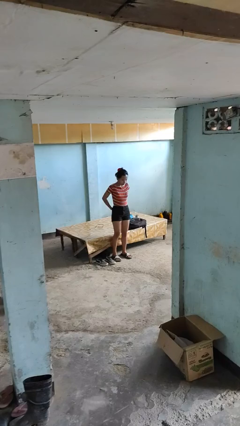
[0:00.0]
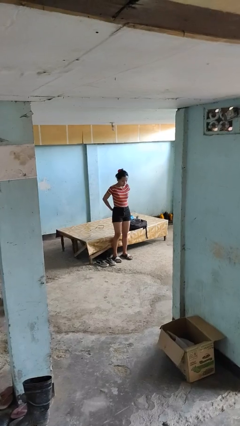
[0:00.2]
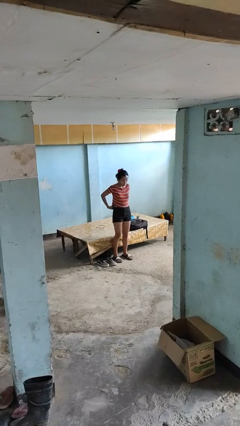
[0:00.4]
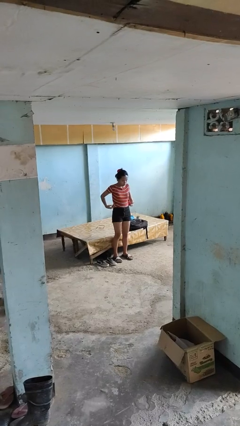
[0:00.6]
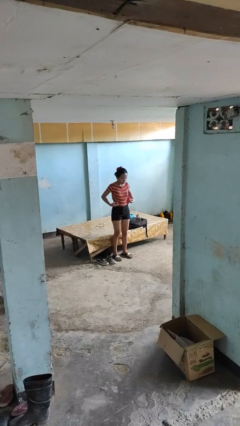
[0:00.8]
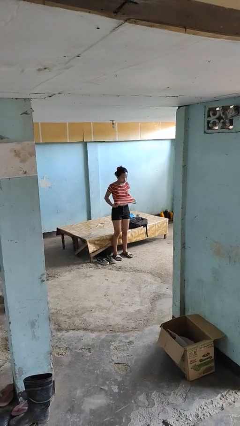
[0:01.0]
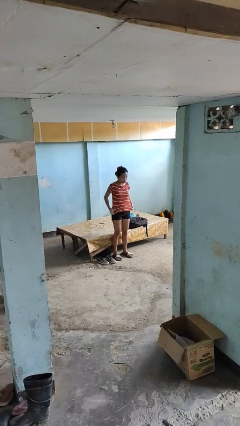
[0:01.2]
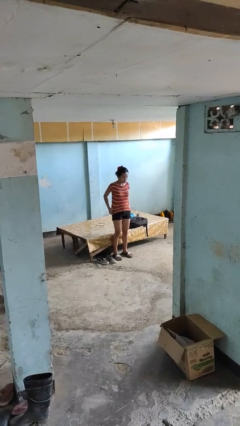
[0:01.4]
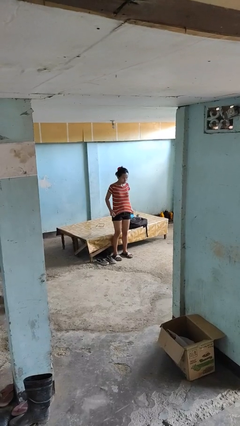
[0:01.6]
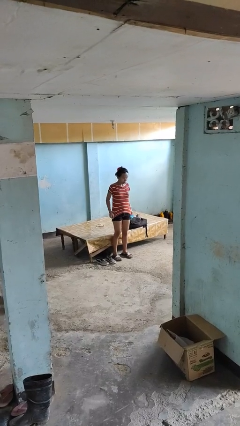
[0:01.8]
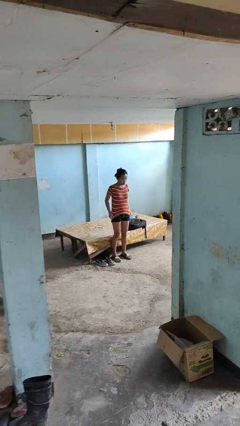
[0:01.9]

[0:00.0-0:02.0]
person untucks shirt

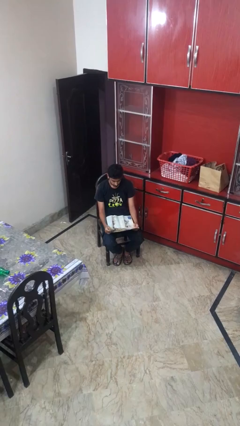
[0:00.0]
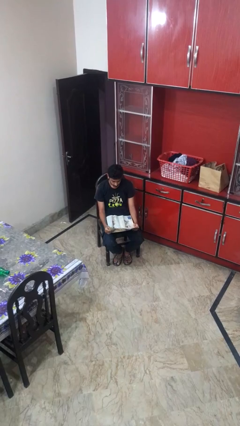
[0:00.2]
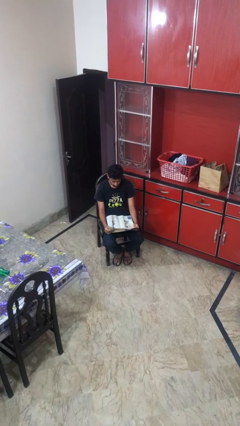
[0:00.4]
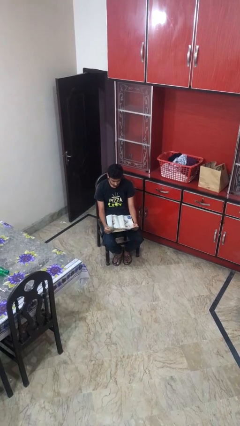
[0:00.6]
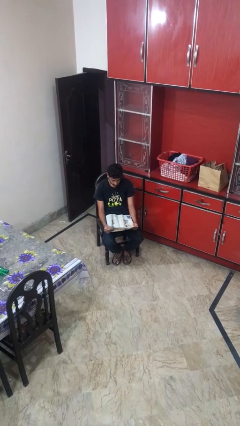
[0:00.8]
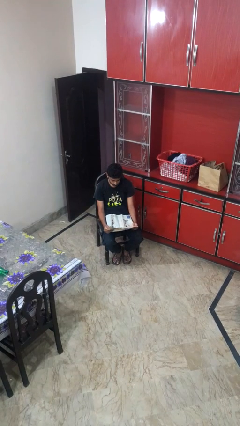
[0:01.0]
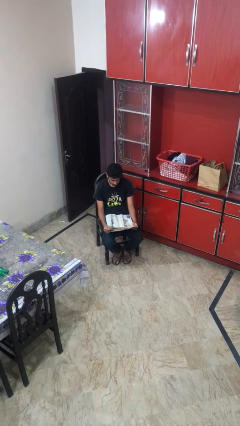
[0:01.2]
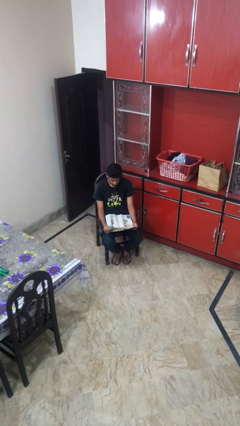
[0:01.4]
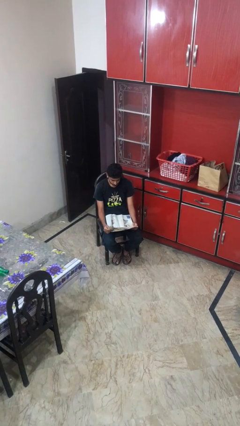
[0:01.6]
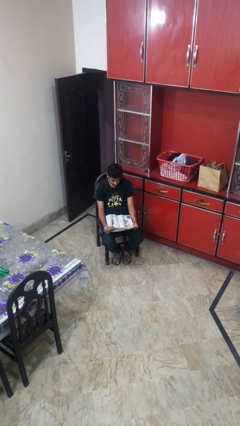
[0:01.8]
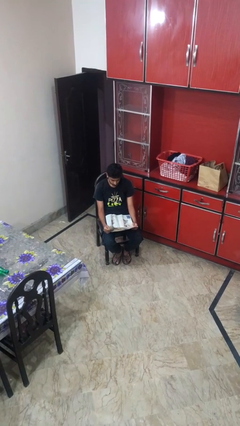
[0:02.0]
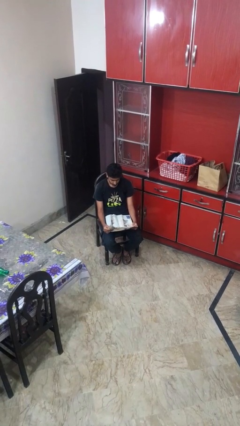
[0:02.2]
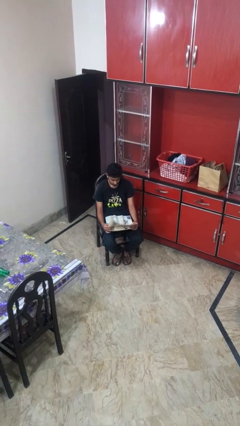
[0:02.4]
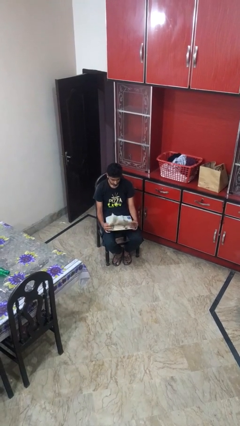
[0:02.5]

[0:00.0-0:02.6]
person reads newspaper

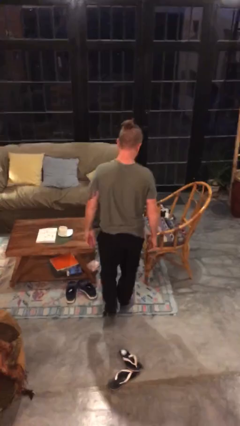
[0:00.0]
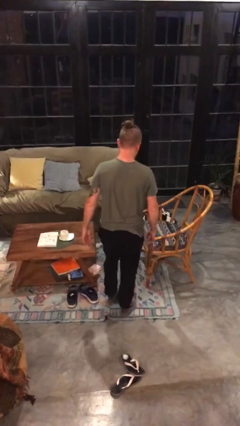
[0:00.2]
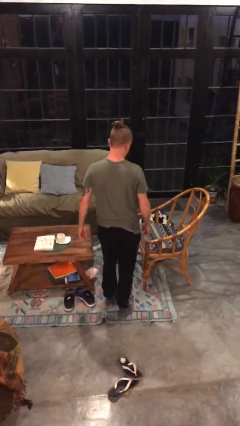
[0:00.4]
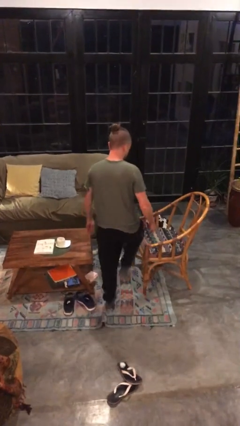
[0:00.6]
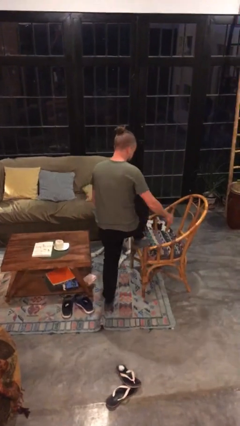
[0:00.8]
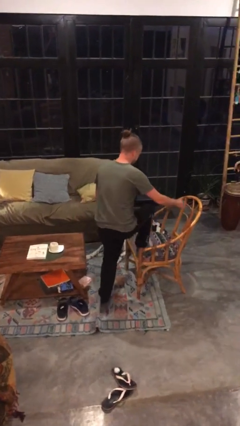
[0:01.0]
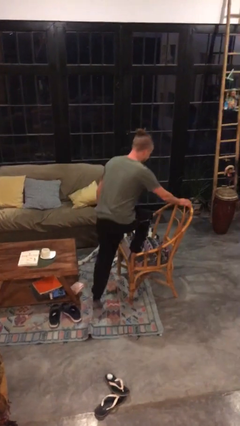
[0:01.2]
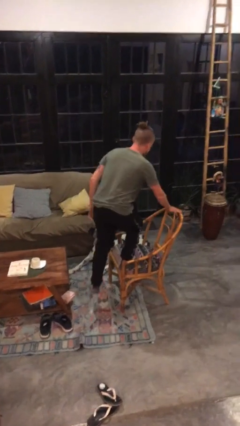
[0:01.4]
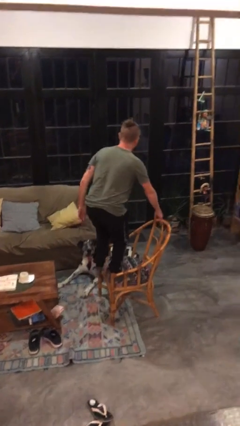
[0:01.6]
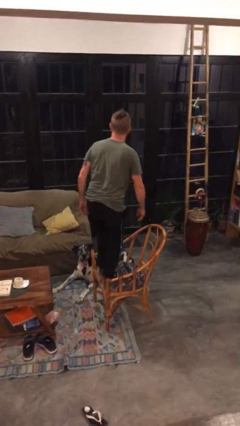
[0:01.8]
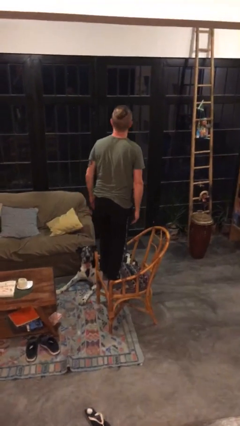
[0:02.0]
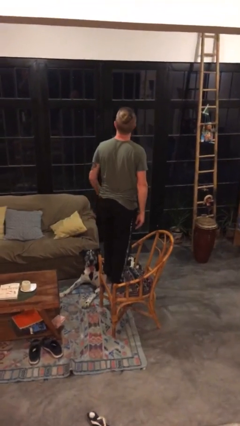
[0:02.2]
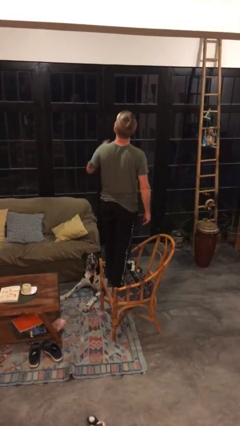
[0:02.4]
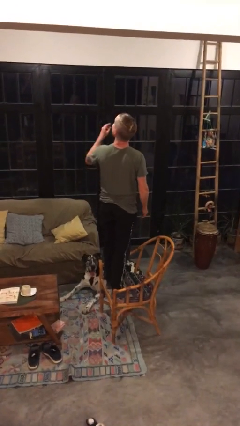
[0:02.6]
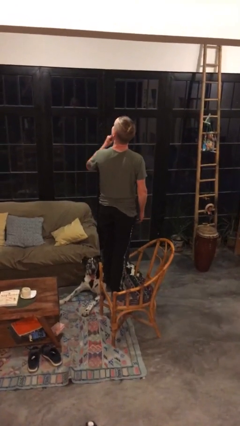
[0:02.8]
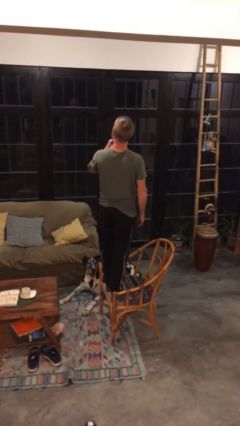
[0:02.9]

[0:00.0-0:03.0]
person climbs on chair

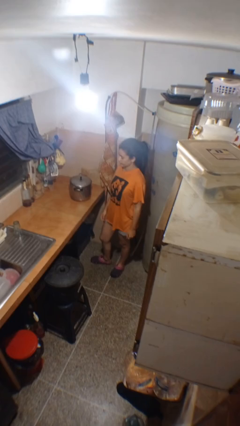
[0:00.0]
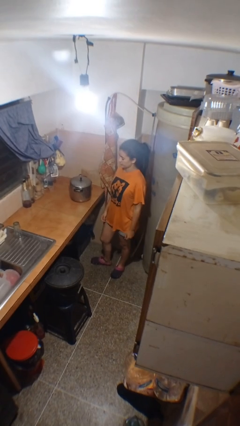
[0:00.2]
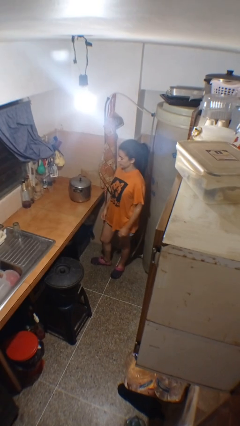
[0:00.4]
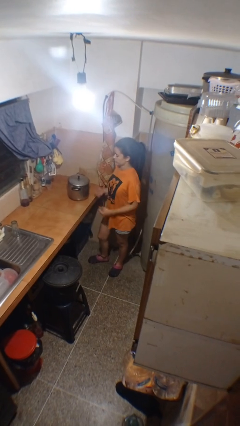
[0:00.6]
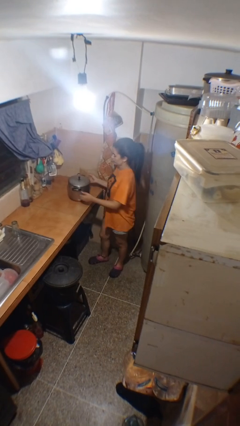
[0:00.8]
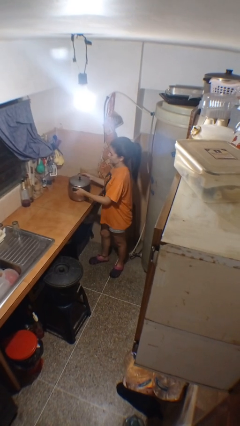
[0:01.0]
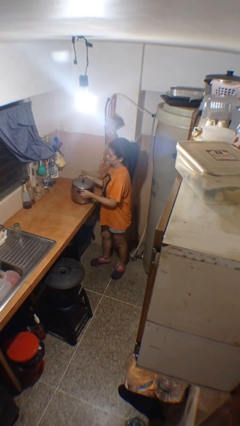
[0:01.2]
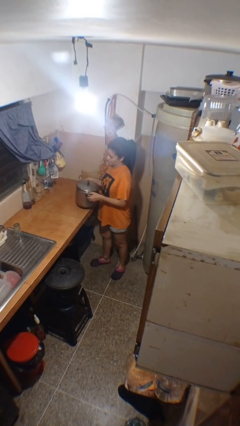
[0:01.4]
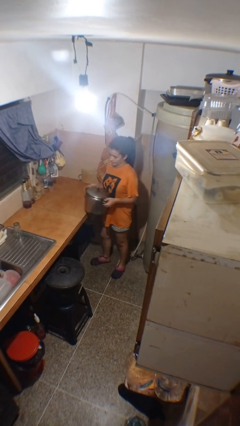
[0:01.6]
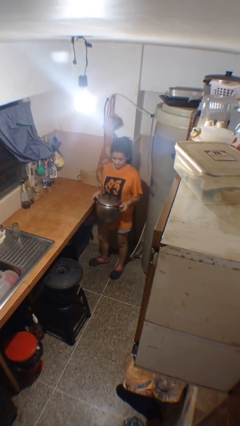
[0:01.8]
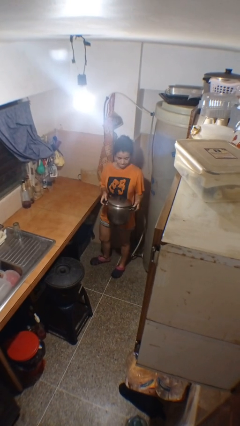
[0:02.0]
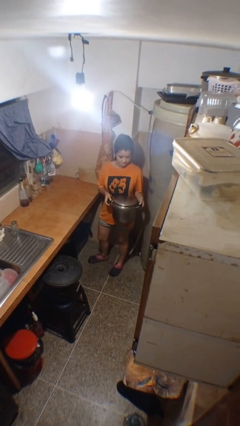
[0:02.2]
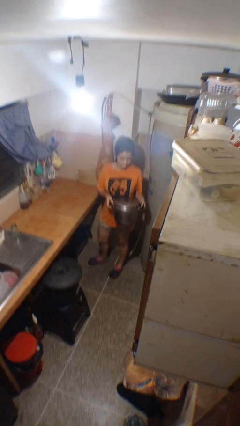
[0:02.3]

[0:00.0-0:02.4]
person picks up object from countertop

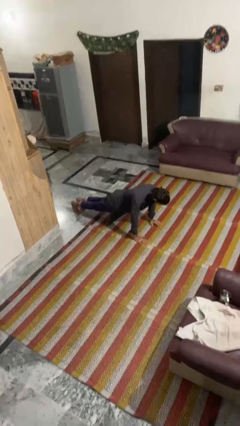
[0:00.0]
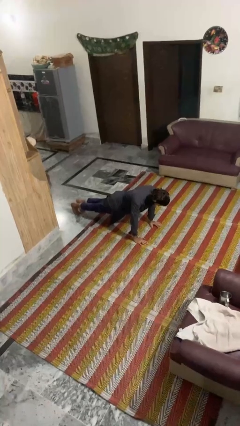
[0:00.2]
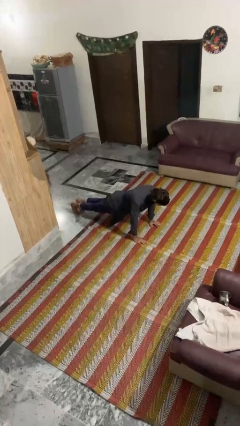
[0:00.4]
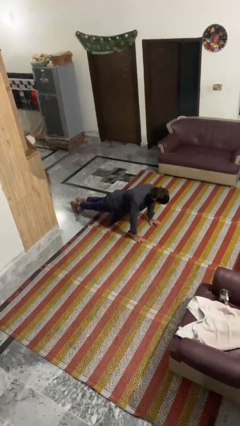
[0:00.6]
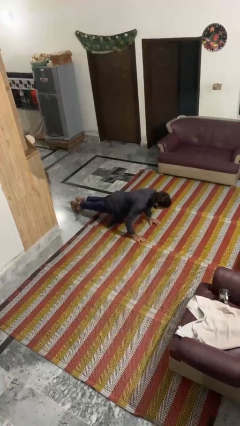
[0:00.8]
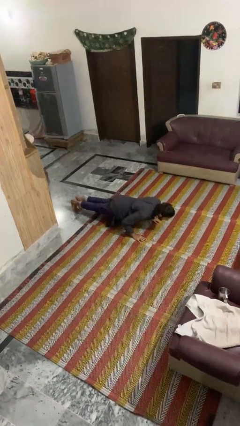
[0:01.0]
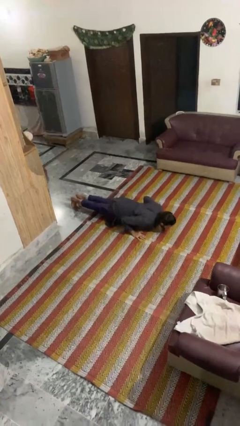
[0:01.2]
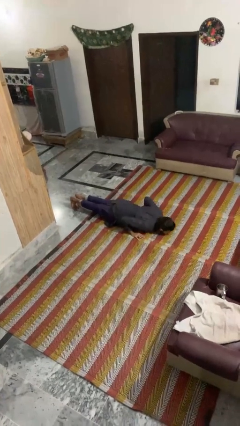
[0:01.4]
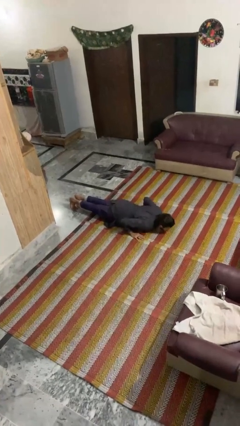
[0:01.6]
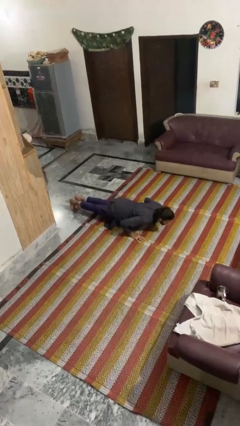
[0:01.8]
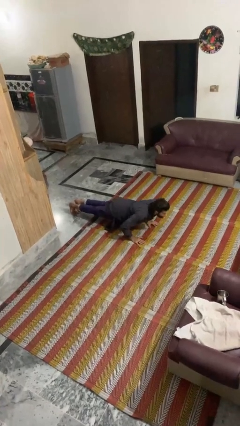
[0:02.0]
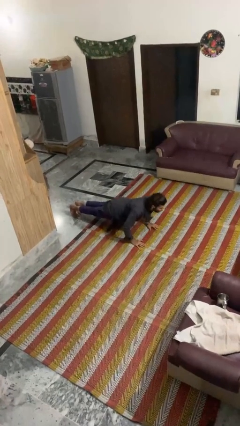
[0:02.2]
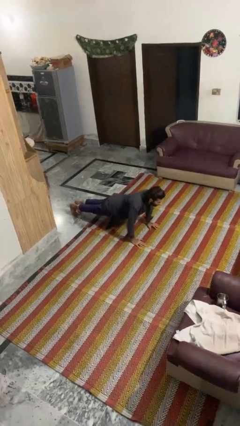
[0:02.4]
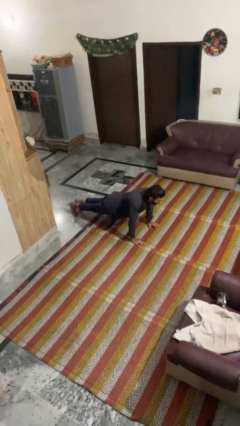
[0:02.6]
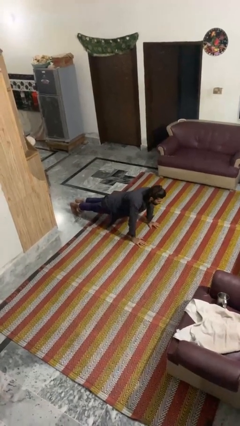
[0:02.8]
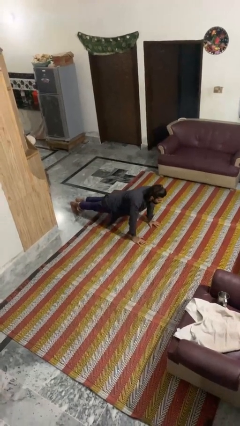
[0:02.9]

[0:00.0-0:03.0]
person exercises with pushup

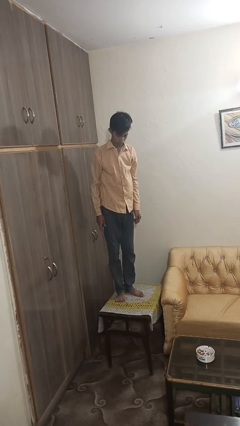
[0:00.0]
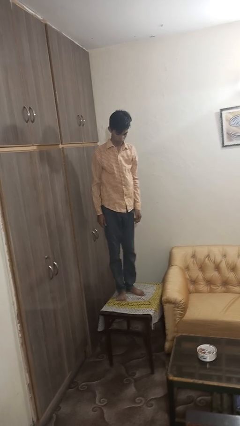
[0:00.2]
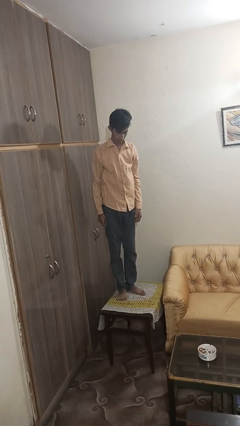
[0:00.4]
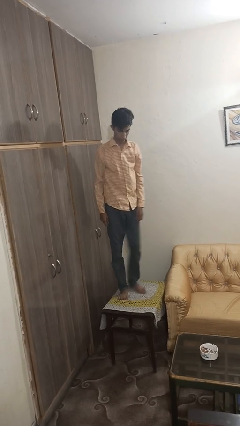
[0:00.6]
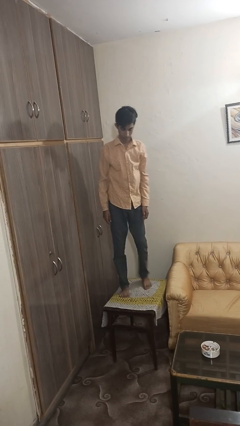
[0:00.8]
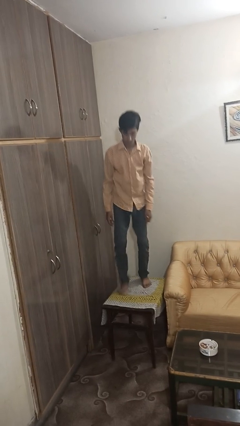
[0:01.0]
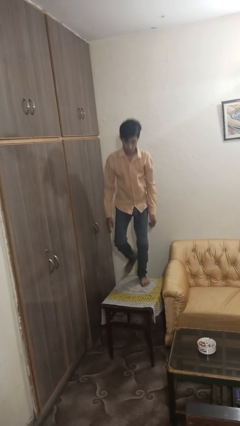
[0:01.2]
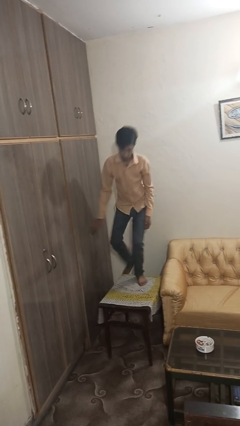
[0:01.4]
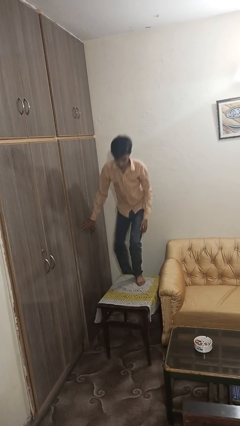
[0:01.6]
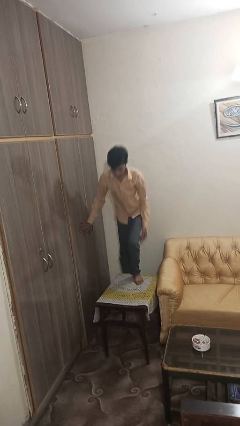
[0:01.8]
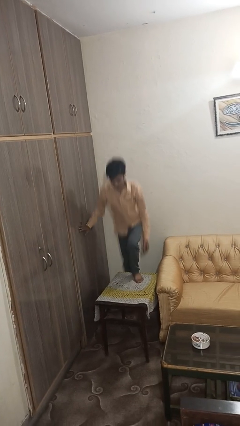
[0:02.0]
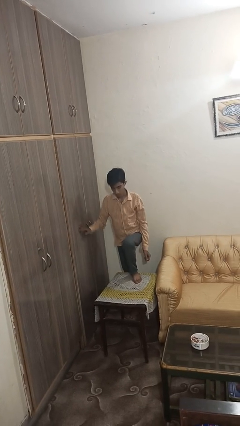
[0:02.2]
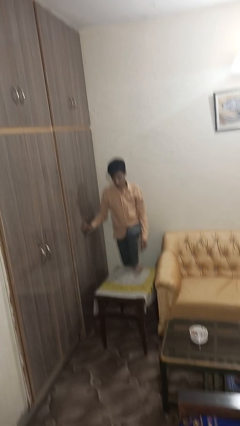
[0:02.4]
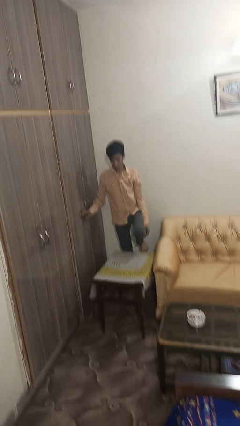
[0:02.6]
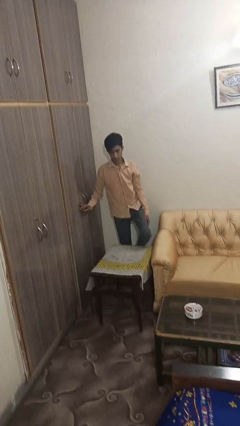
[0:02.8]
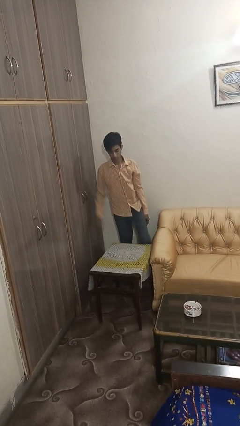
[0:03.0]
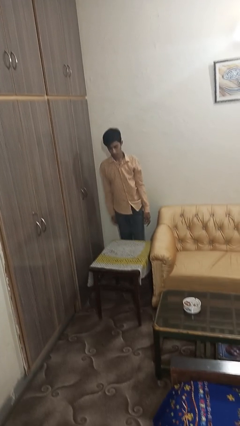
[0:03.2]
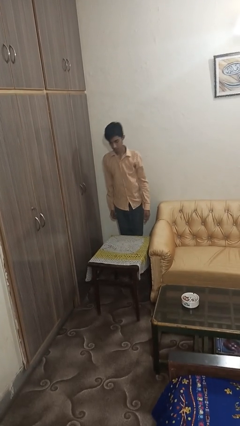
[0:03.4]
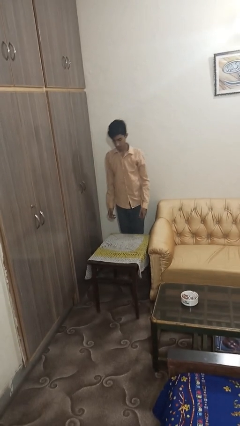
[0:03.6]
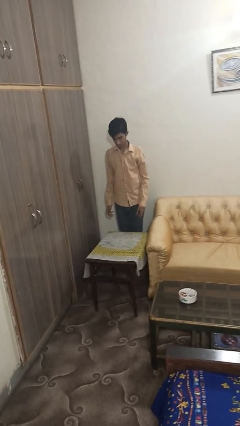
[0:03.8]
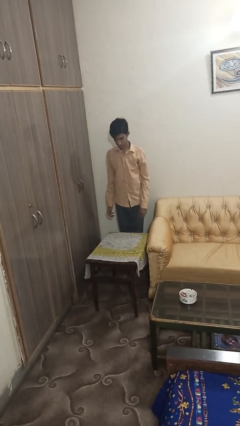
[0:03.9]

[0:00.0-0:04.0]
person climbs off table
